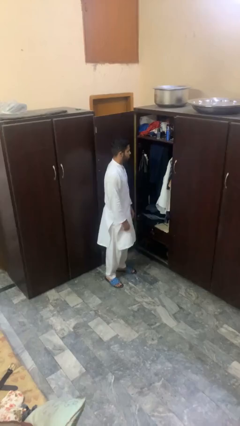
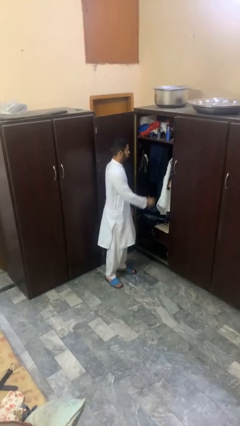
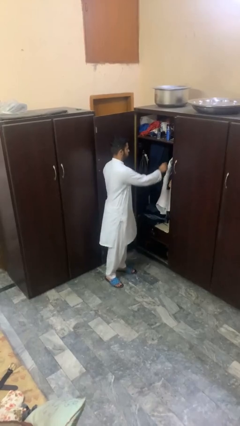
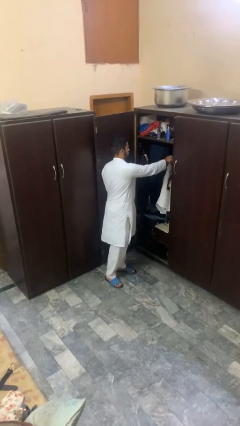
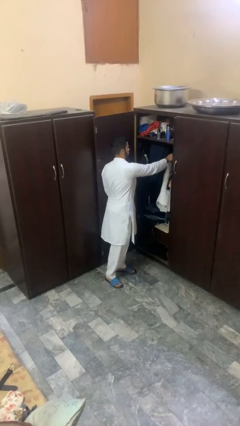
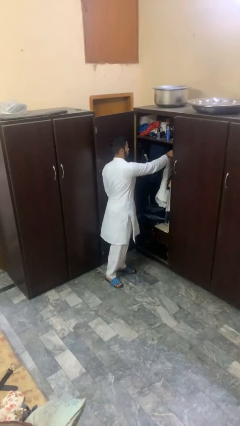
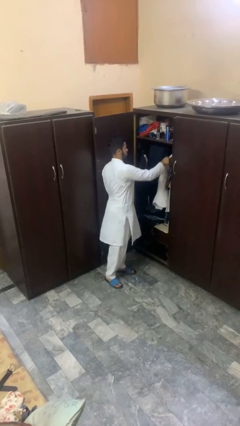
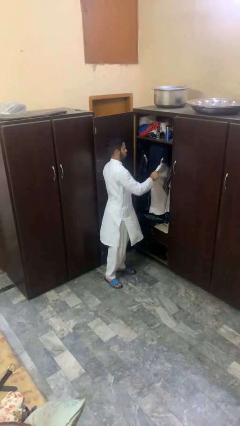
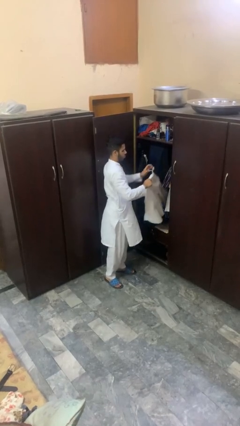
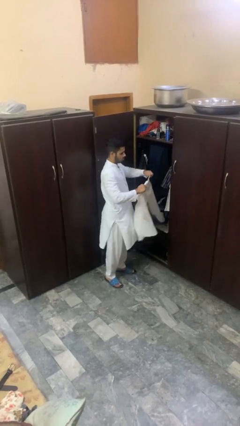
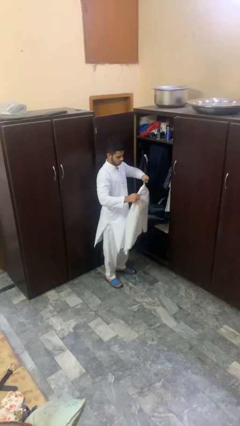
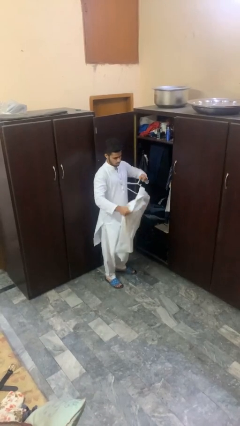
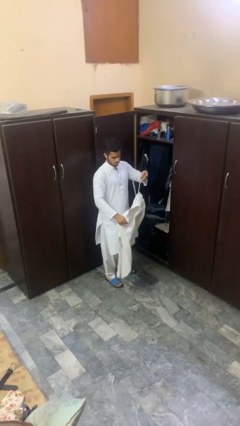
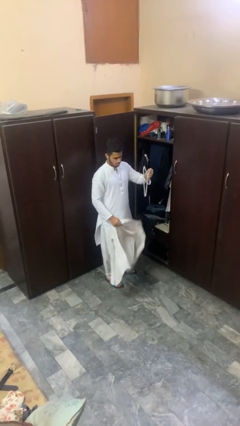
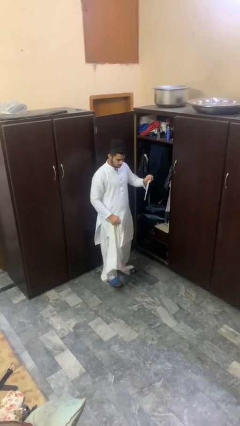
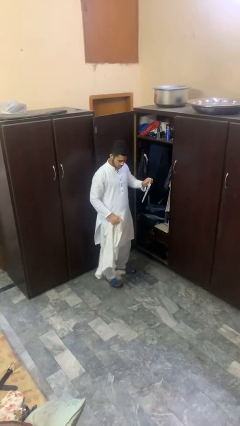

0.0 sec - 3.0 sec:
person takes clothes from closet

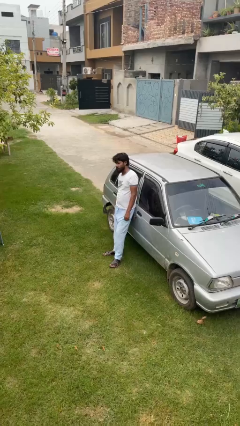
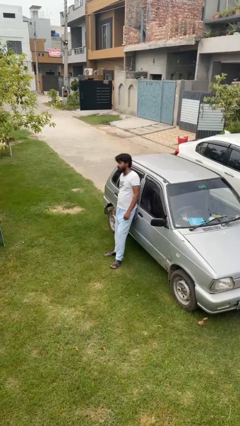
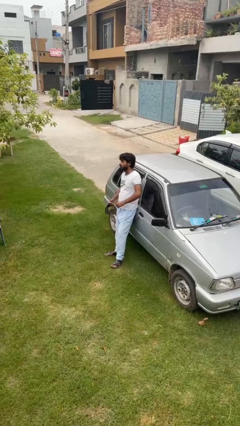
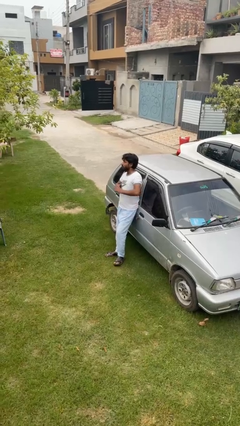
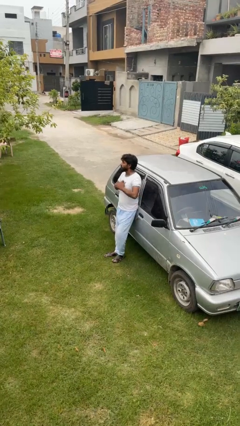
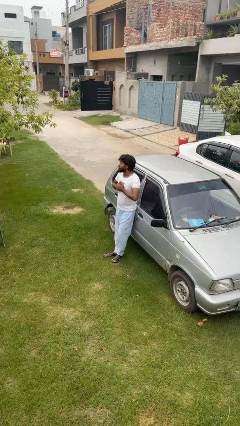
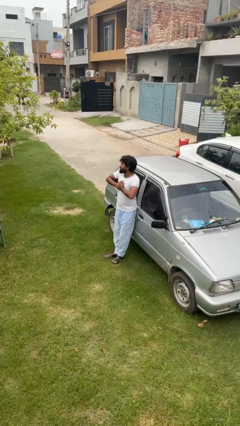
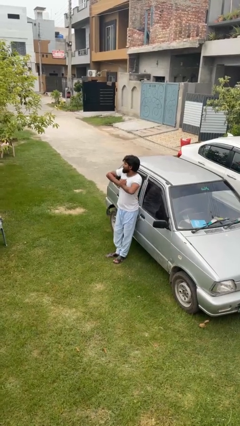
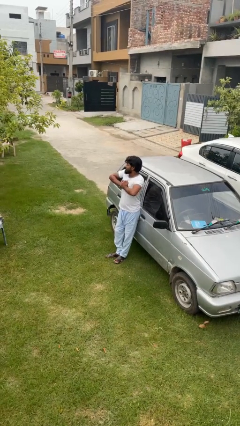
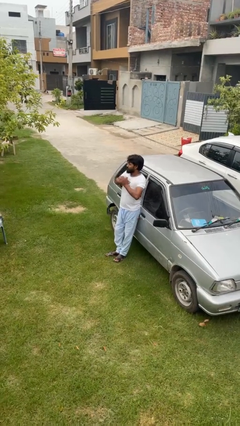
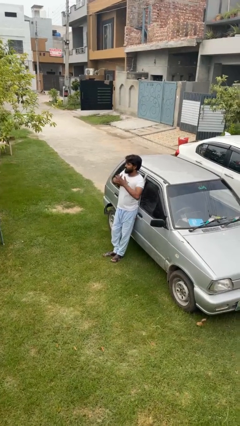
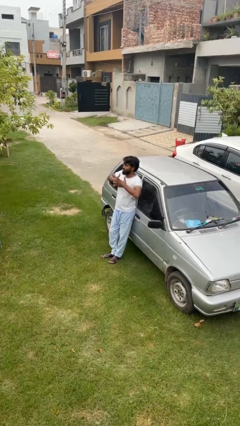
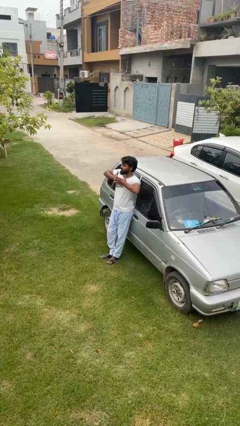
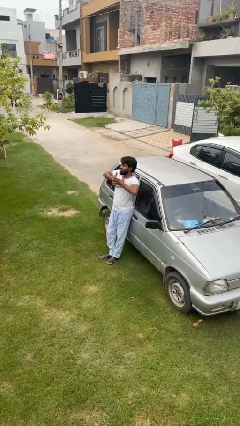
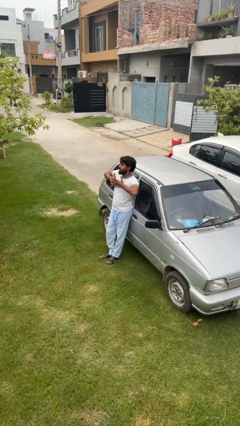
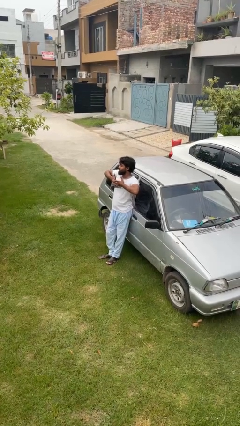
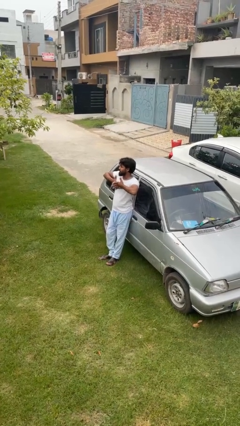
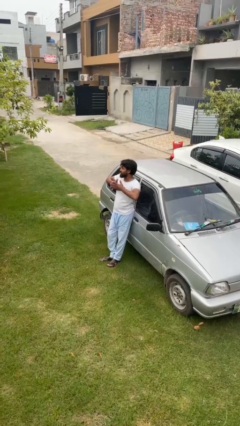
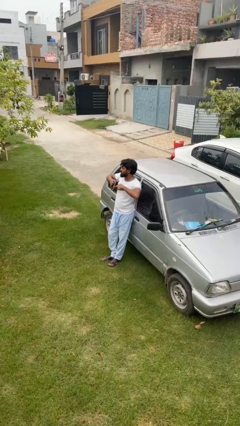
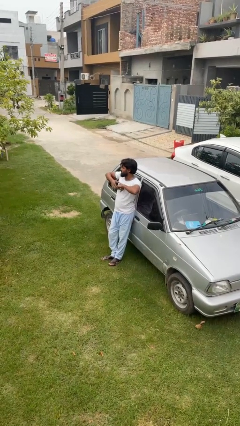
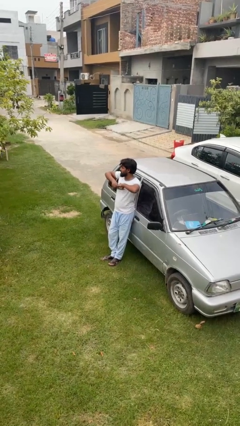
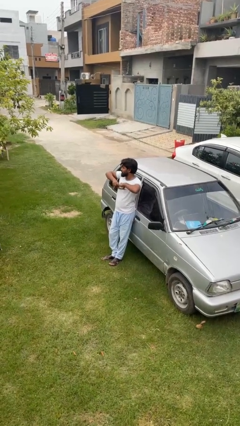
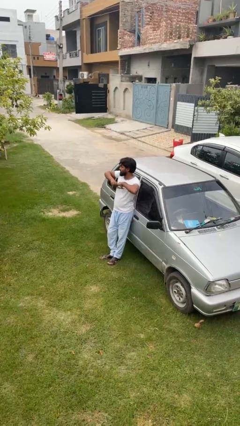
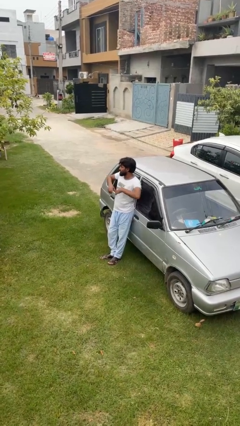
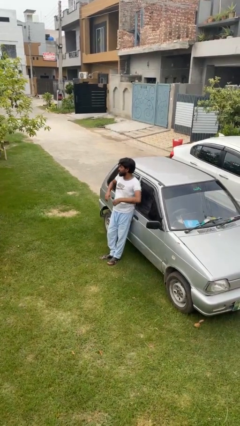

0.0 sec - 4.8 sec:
person cracks knuckles

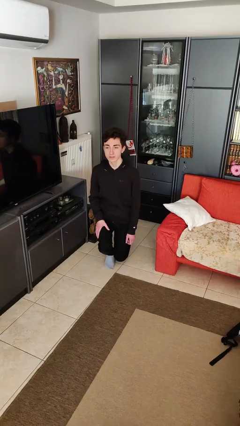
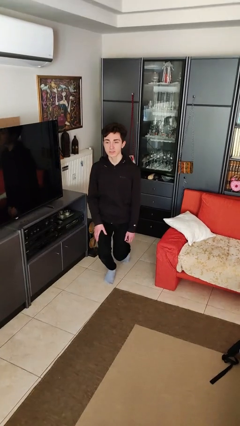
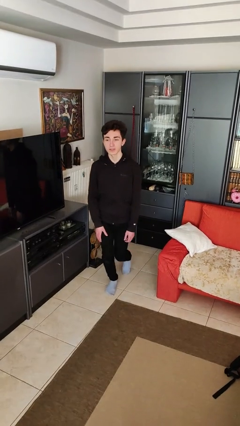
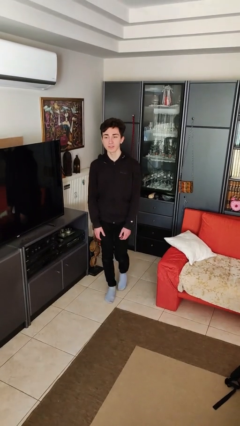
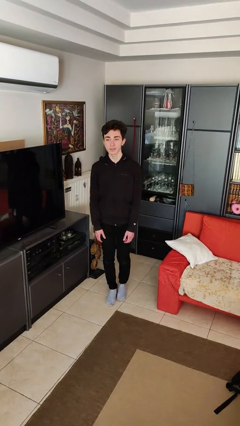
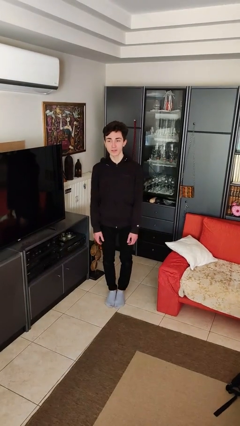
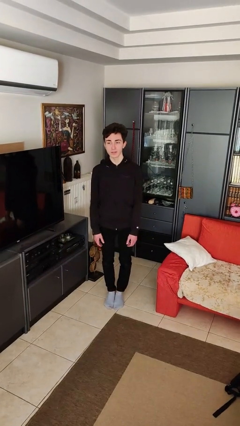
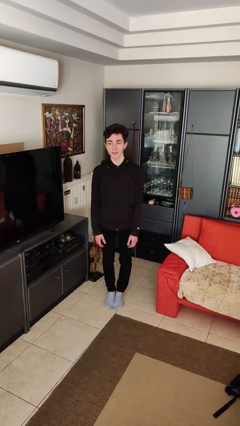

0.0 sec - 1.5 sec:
person stands up from floor

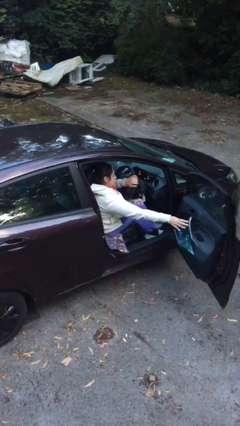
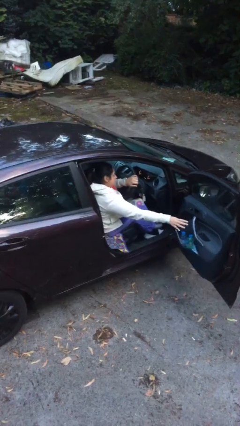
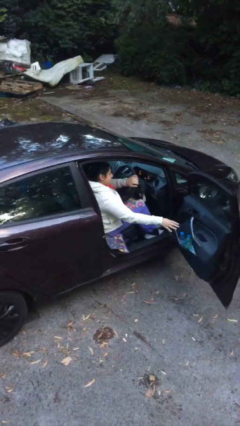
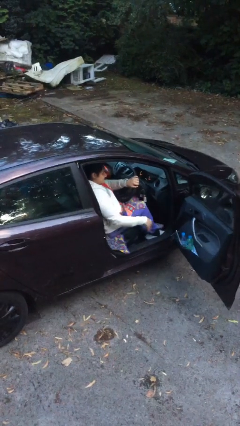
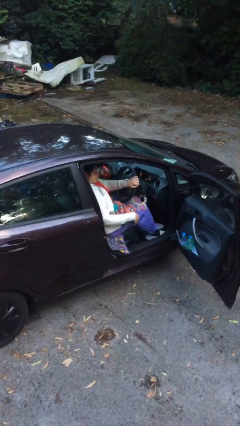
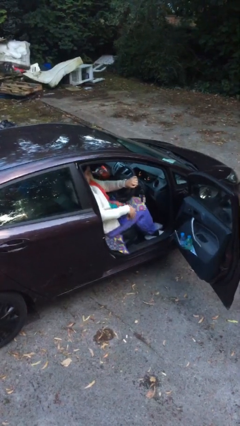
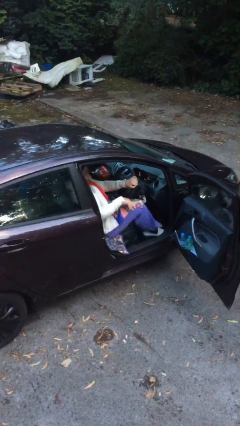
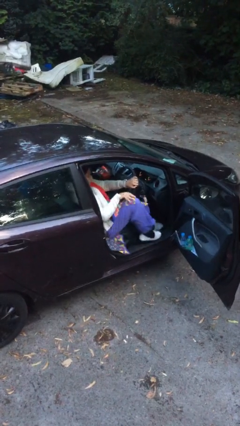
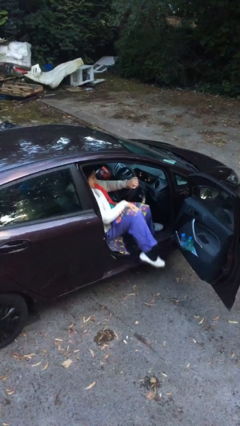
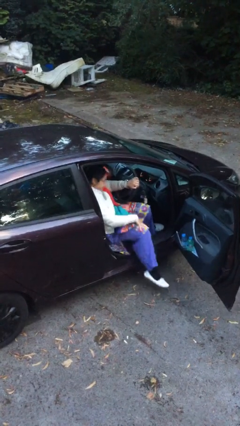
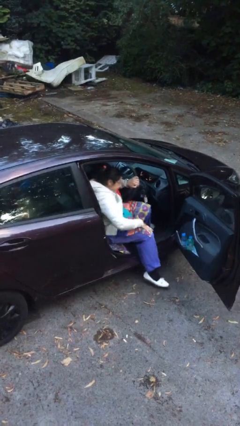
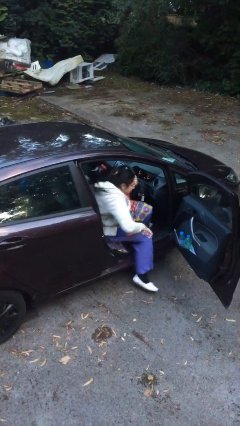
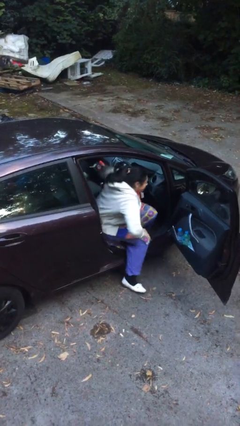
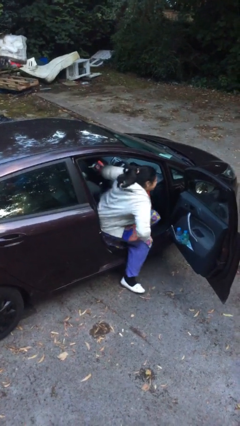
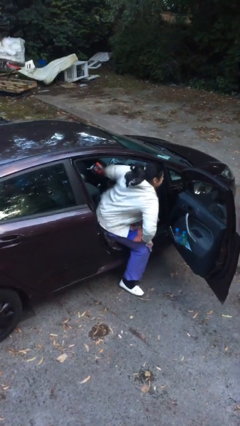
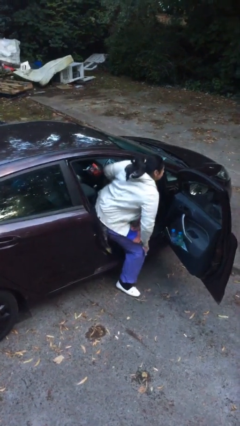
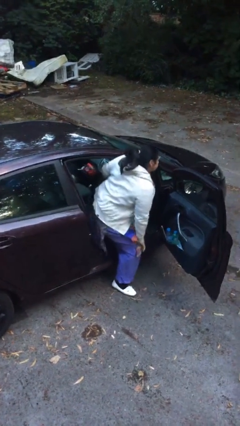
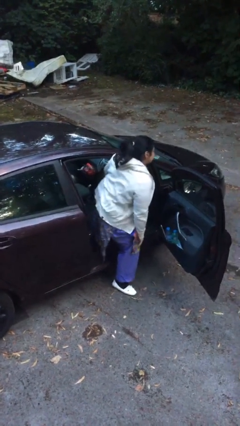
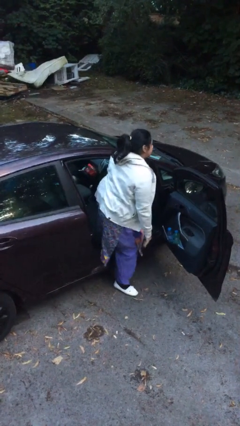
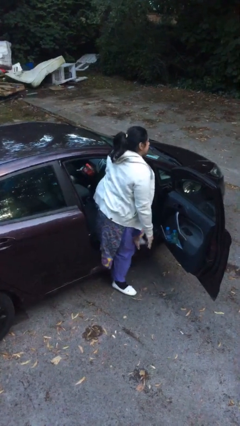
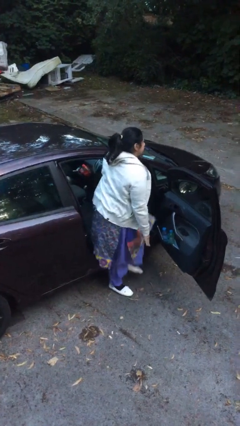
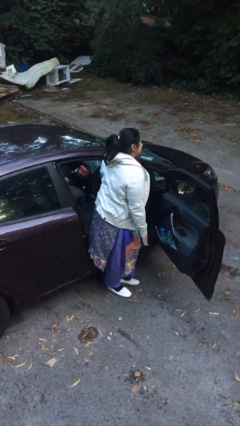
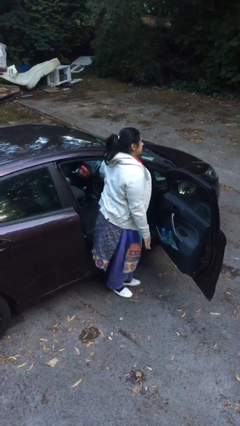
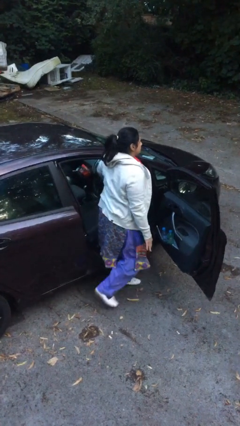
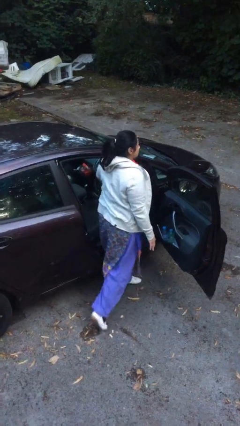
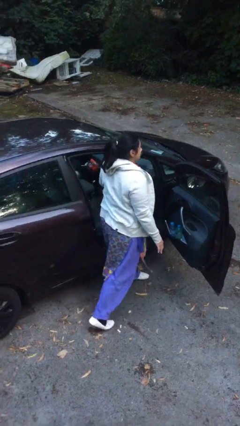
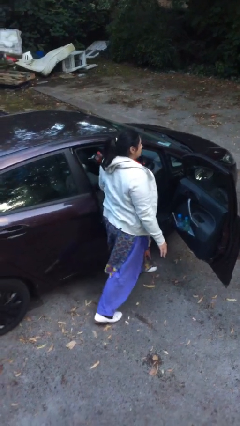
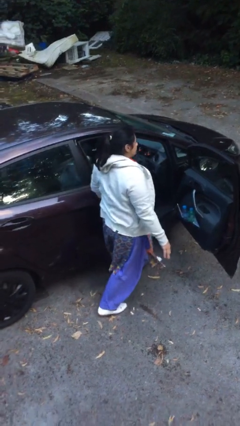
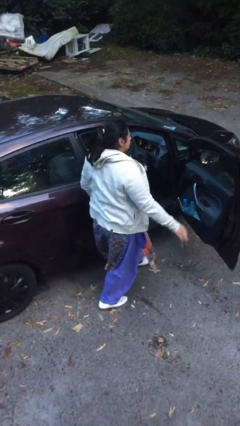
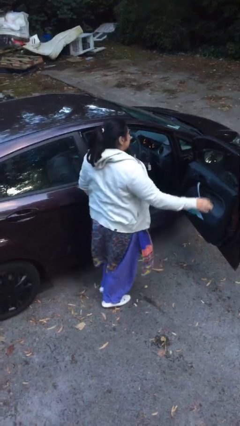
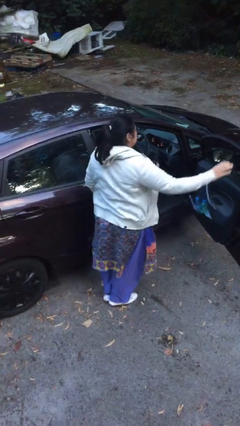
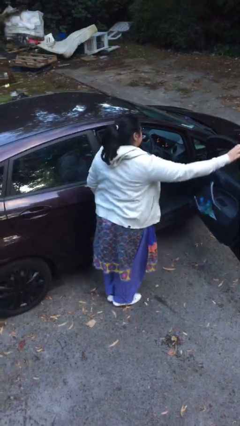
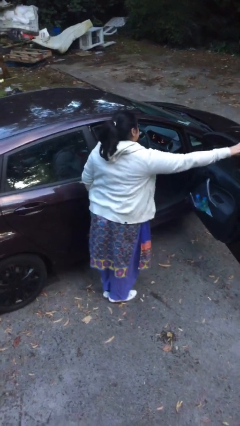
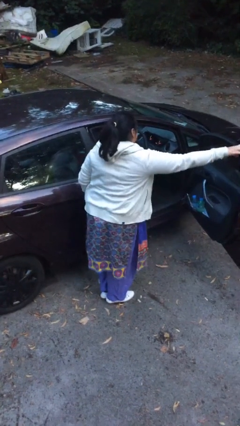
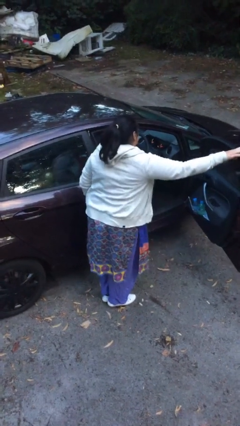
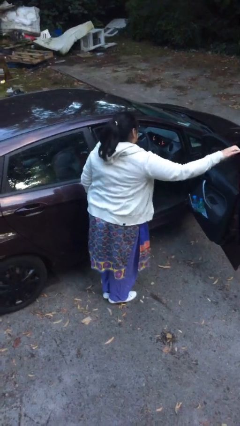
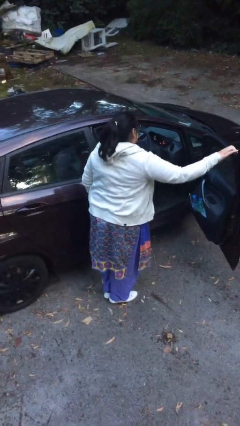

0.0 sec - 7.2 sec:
person exits car

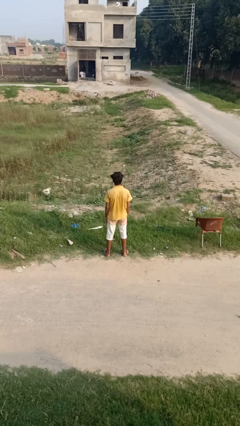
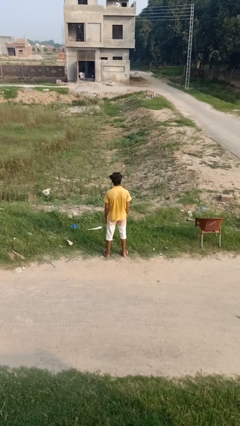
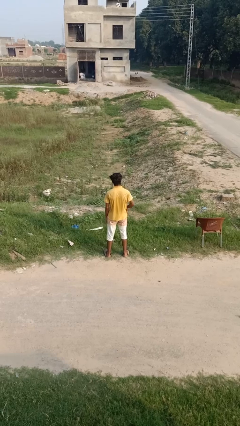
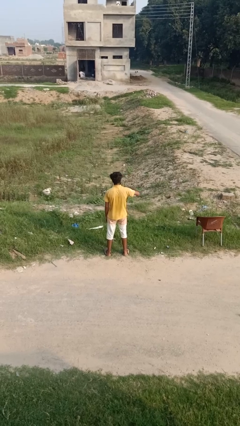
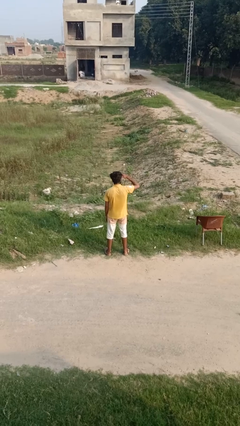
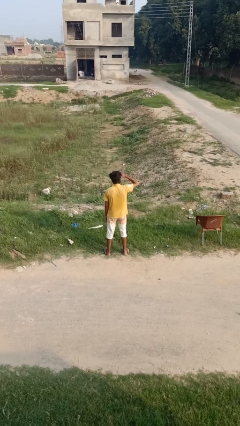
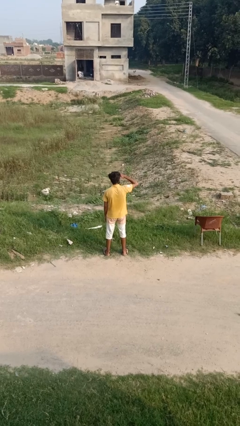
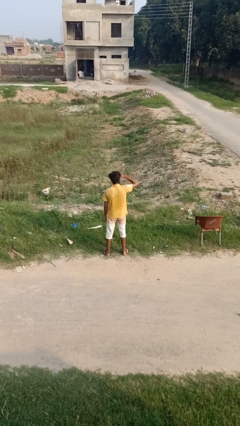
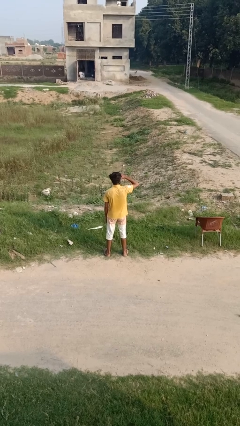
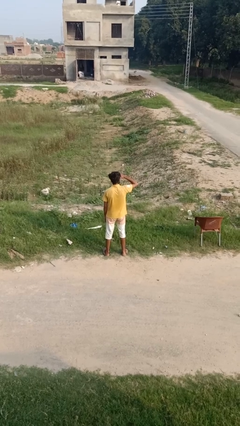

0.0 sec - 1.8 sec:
person shades eyes
